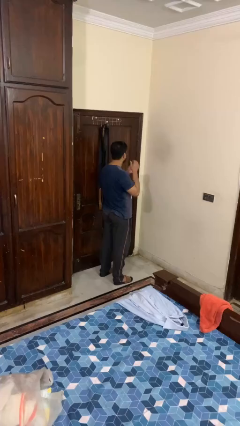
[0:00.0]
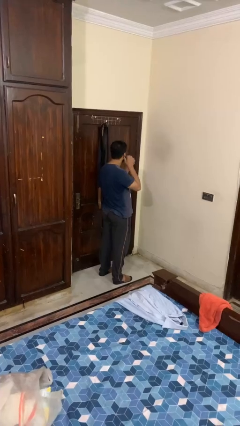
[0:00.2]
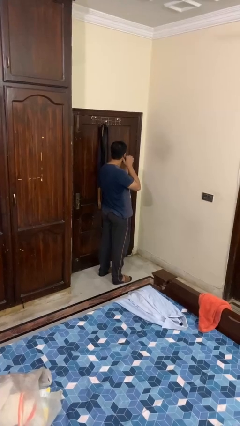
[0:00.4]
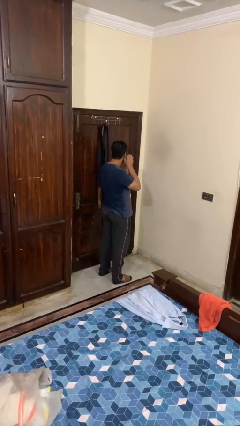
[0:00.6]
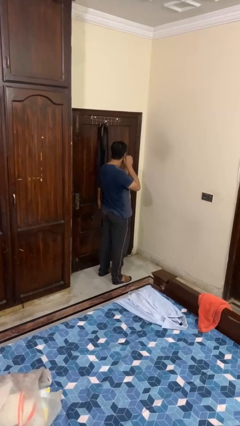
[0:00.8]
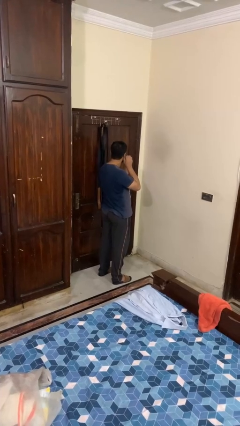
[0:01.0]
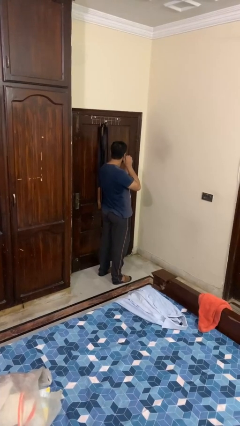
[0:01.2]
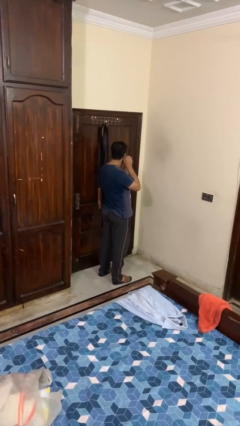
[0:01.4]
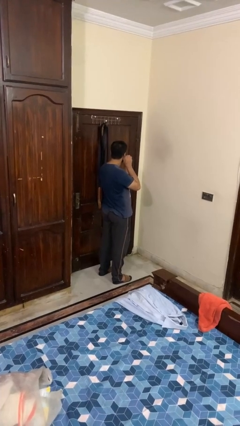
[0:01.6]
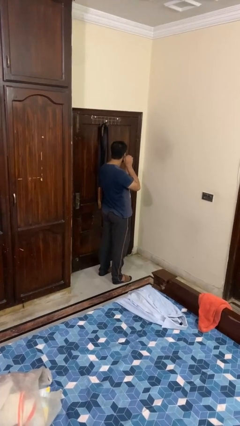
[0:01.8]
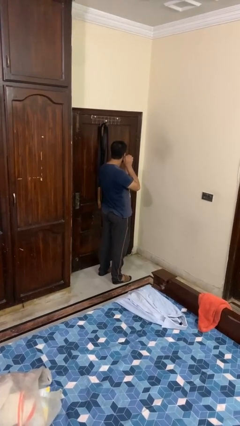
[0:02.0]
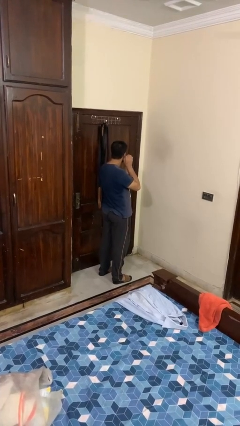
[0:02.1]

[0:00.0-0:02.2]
person puts on earrings

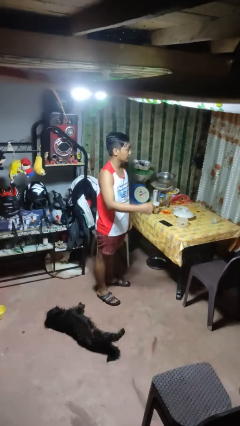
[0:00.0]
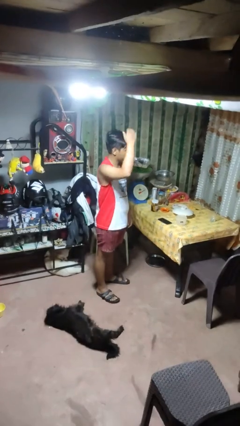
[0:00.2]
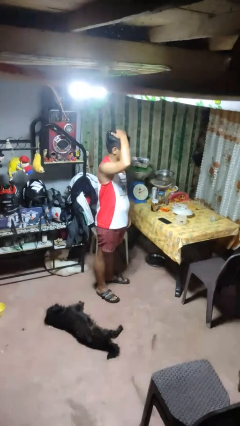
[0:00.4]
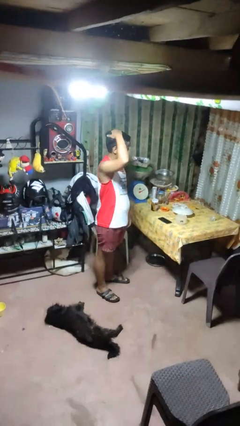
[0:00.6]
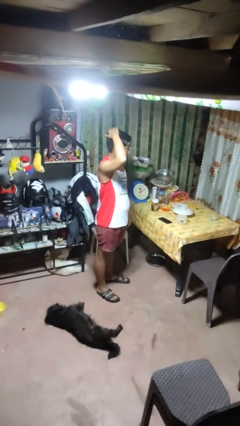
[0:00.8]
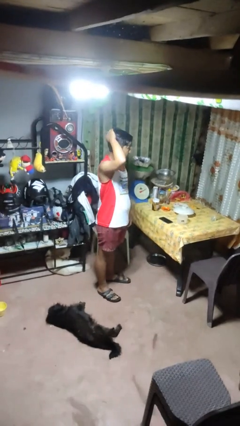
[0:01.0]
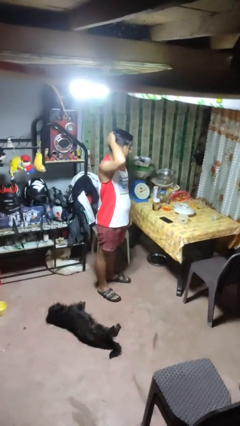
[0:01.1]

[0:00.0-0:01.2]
person pats head

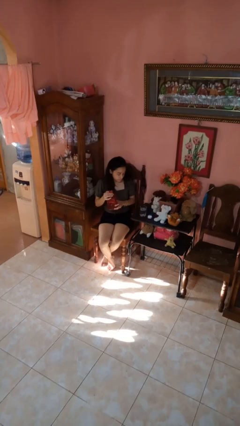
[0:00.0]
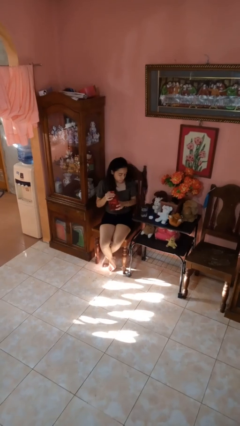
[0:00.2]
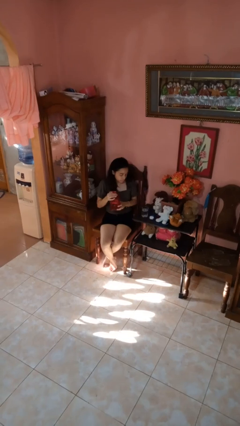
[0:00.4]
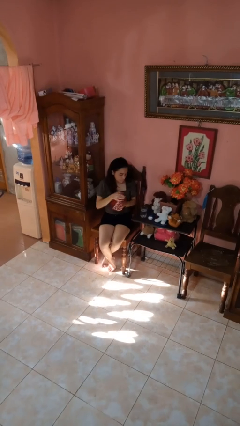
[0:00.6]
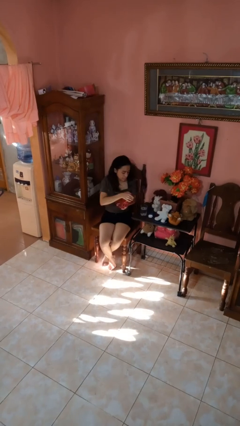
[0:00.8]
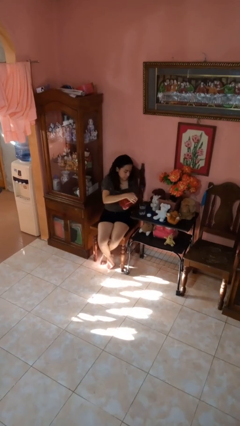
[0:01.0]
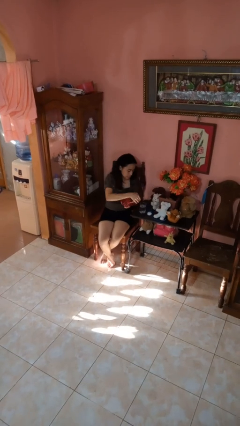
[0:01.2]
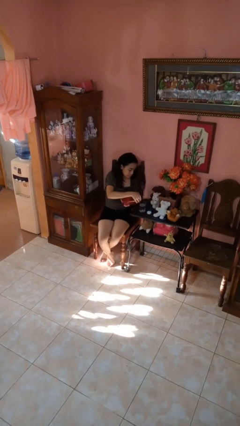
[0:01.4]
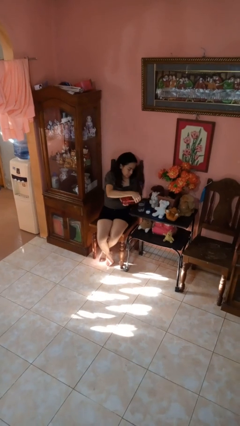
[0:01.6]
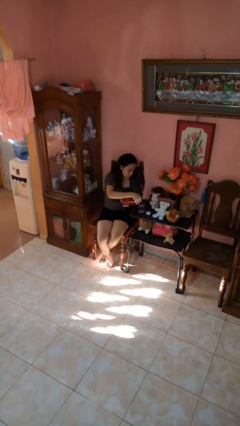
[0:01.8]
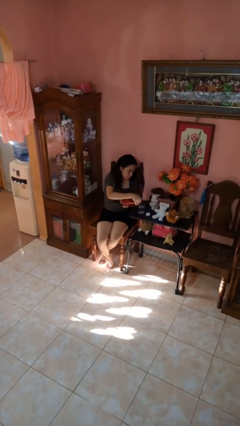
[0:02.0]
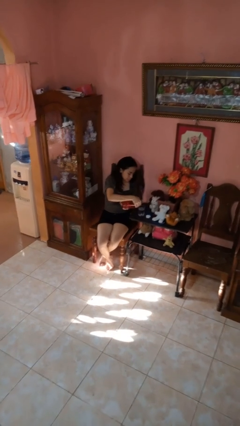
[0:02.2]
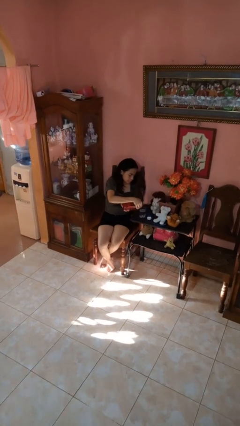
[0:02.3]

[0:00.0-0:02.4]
person pours liquid into cup

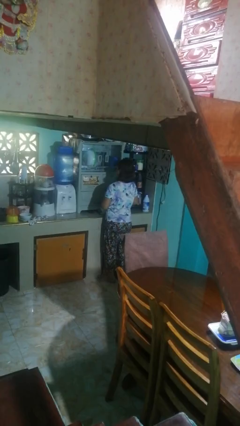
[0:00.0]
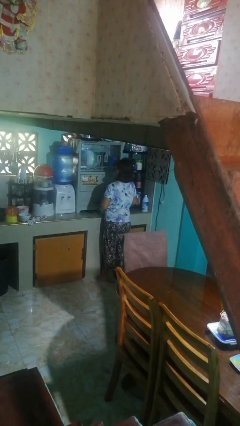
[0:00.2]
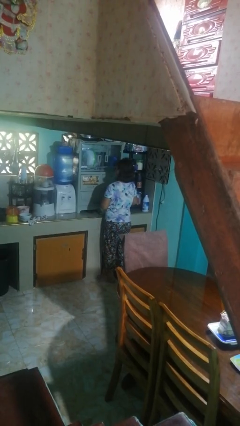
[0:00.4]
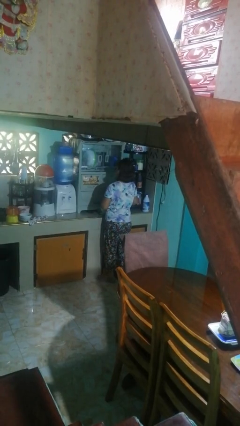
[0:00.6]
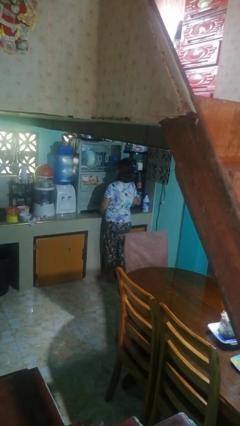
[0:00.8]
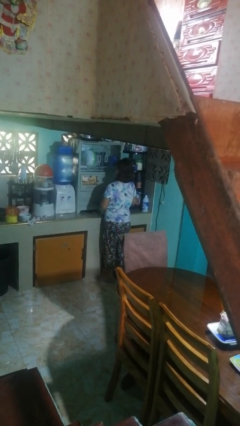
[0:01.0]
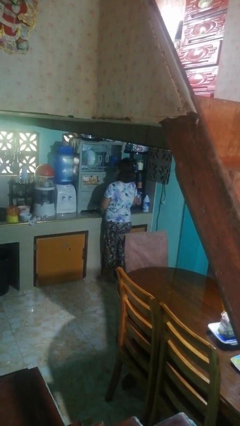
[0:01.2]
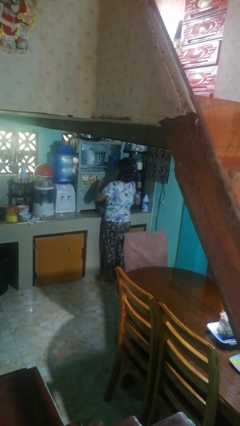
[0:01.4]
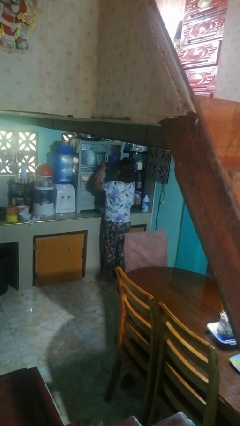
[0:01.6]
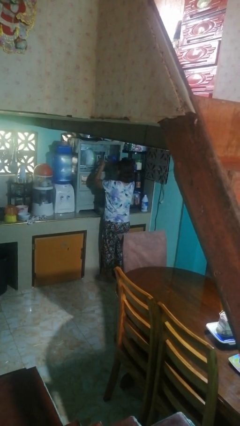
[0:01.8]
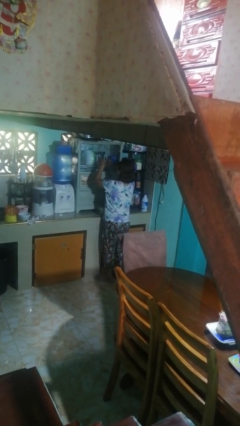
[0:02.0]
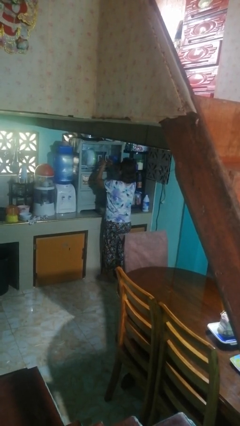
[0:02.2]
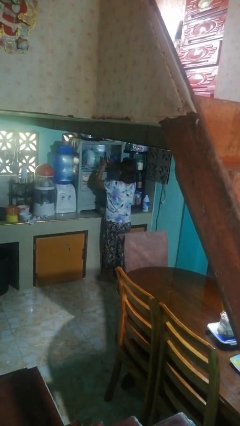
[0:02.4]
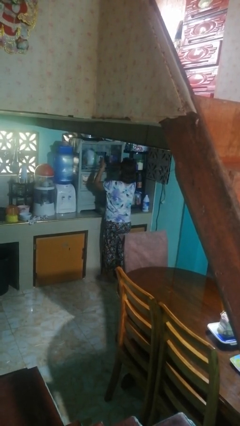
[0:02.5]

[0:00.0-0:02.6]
person closes curtains

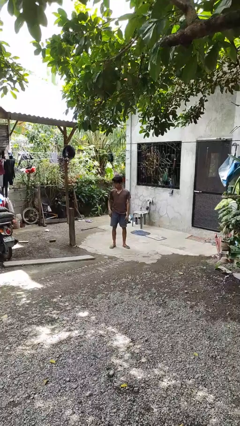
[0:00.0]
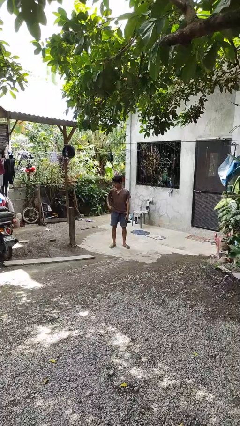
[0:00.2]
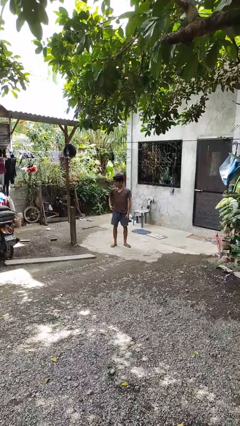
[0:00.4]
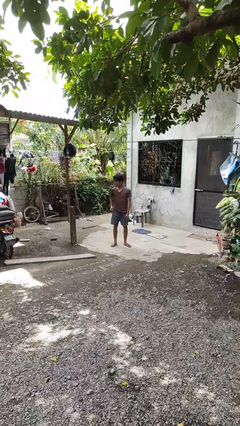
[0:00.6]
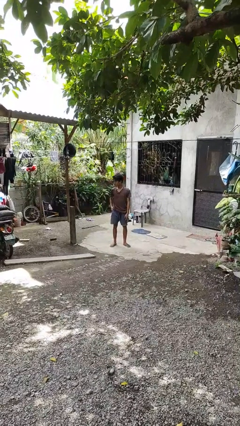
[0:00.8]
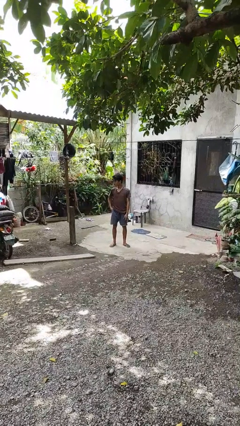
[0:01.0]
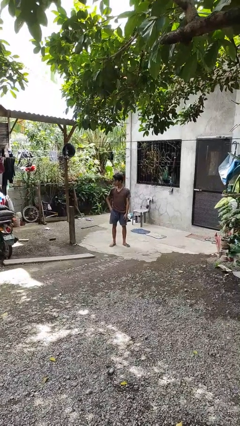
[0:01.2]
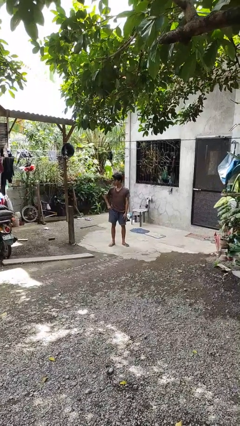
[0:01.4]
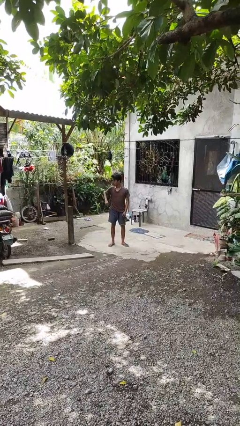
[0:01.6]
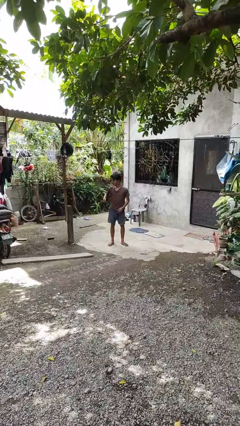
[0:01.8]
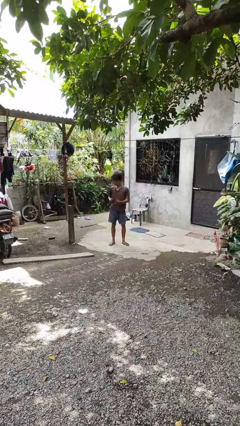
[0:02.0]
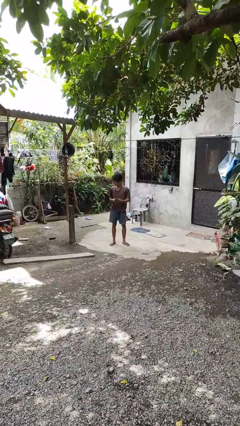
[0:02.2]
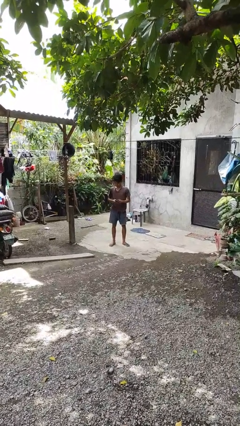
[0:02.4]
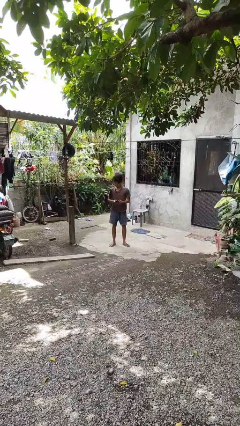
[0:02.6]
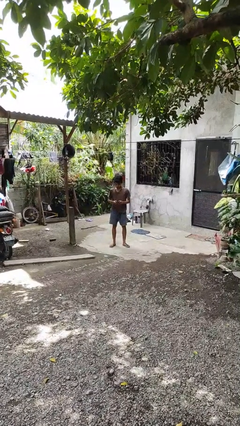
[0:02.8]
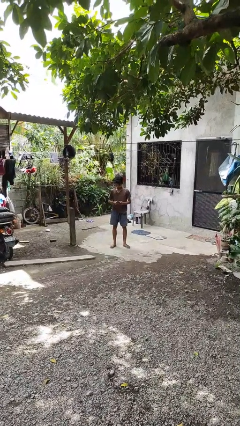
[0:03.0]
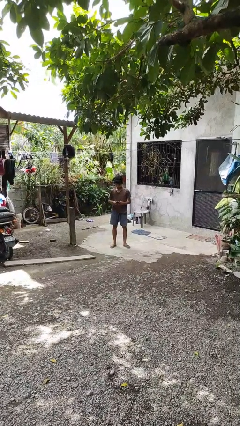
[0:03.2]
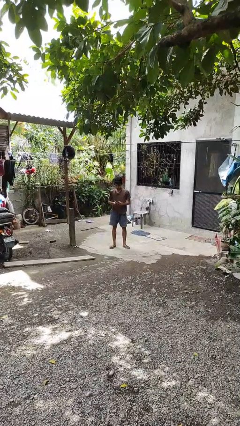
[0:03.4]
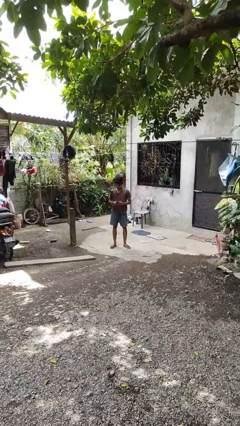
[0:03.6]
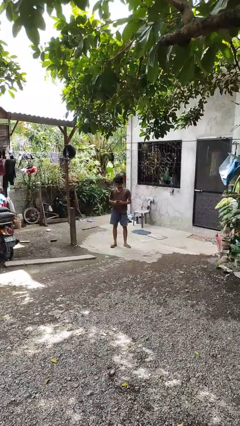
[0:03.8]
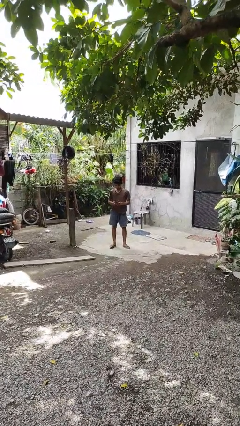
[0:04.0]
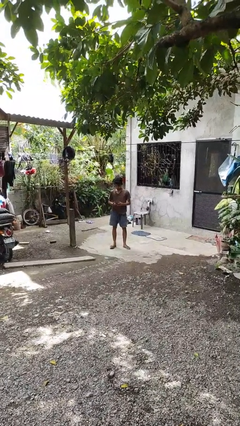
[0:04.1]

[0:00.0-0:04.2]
person takes phone from pocket

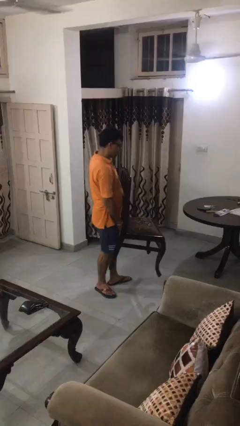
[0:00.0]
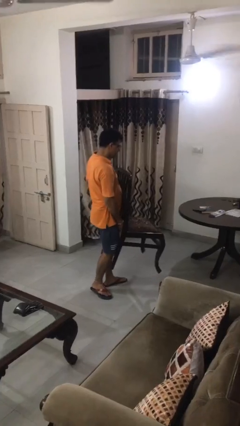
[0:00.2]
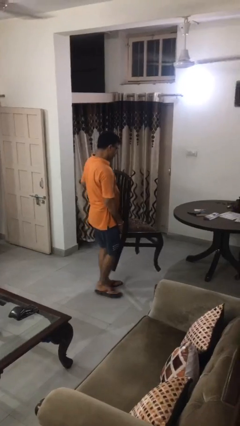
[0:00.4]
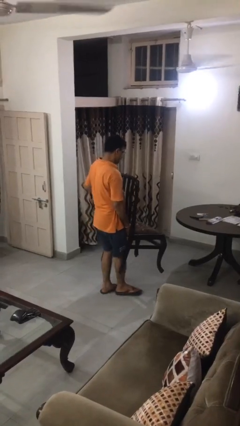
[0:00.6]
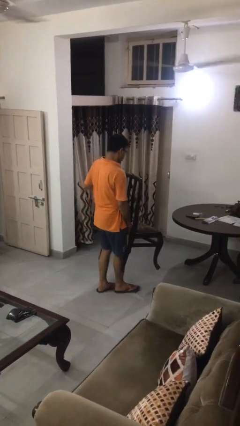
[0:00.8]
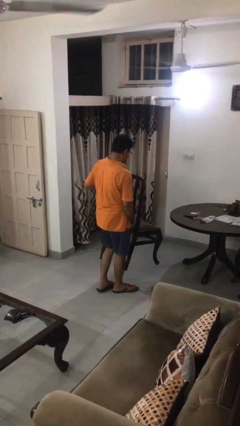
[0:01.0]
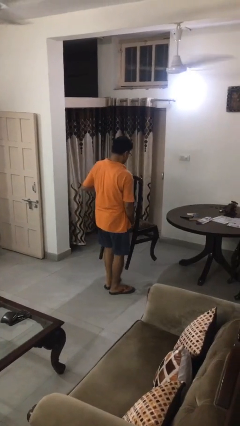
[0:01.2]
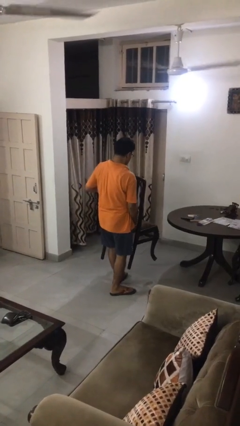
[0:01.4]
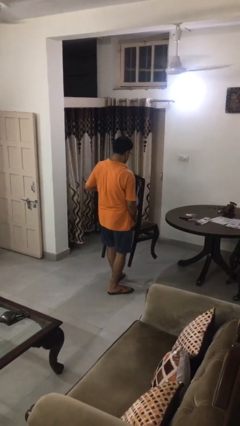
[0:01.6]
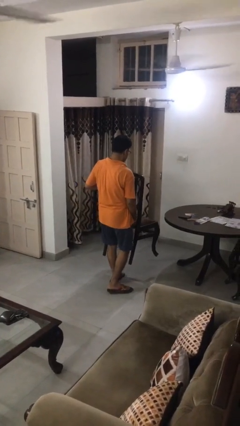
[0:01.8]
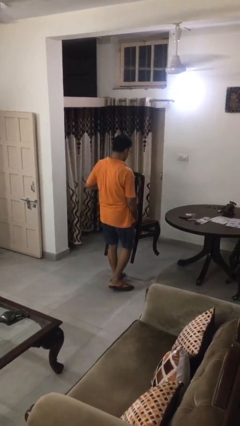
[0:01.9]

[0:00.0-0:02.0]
person carries furniture

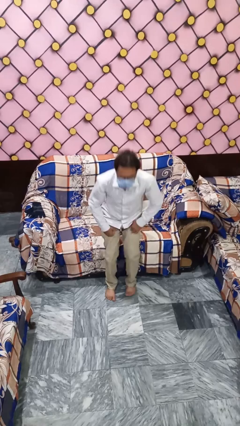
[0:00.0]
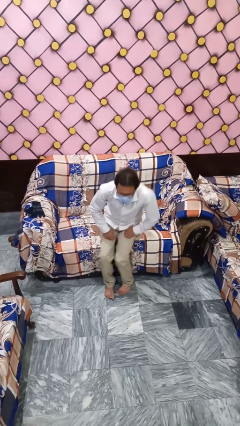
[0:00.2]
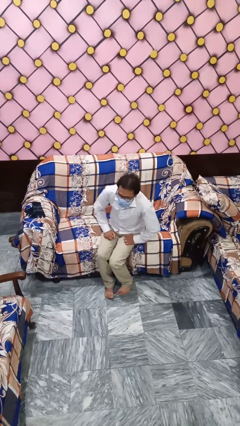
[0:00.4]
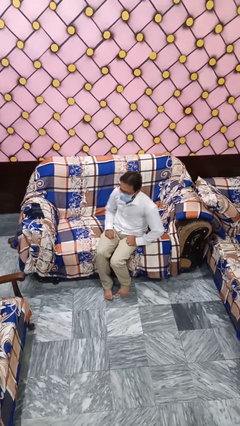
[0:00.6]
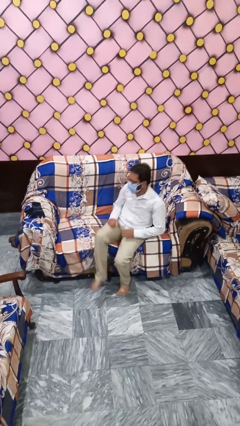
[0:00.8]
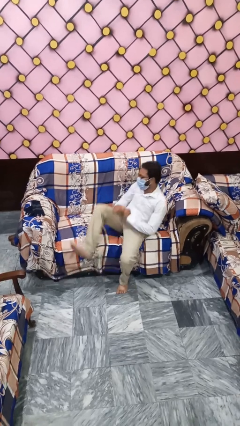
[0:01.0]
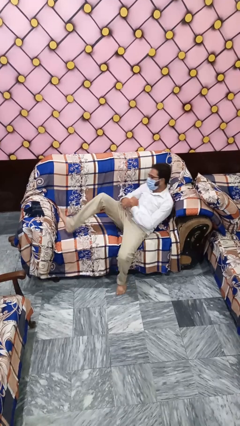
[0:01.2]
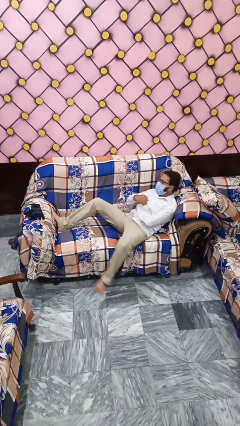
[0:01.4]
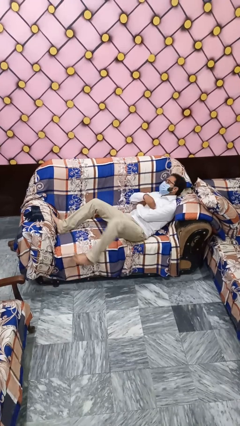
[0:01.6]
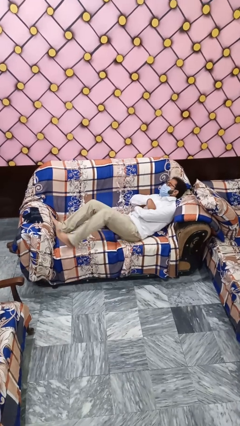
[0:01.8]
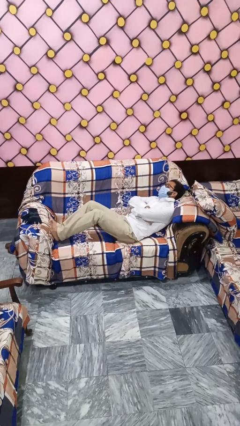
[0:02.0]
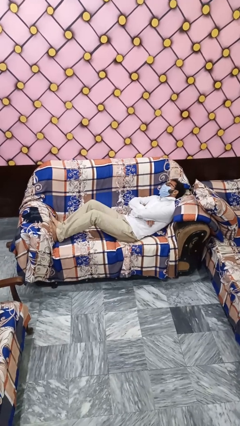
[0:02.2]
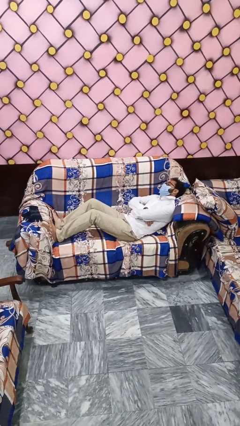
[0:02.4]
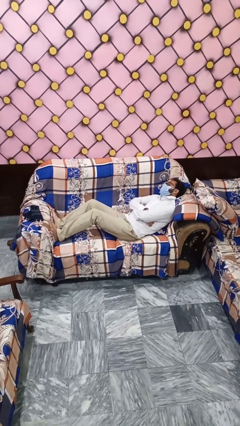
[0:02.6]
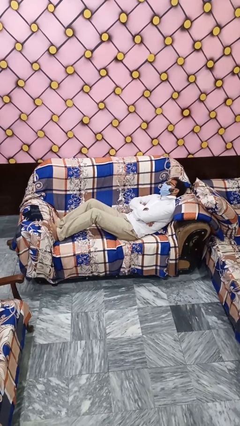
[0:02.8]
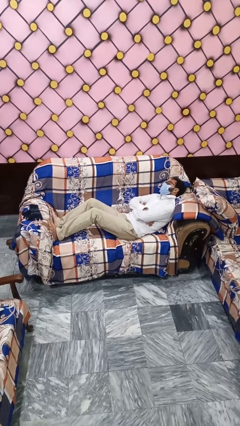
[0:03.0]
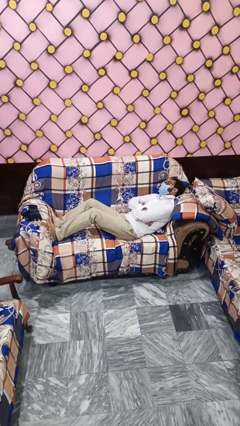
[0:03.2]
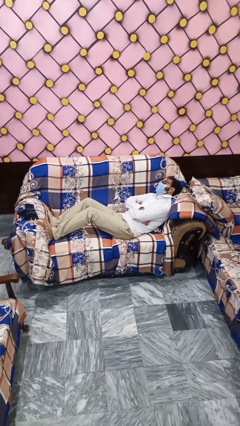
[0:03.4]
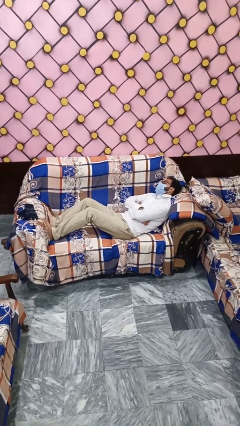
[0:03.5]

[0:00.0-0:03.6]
person lies down on couch
